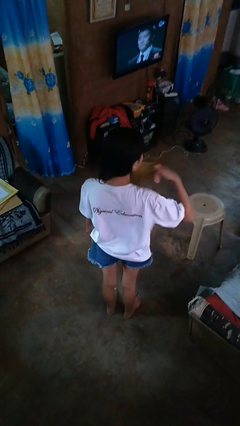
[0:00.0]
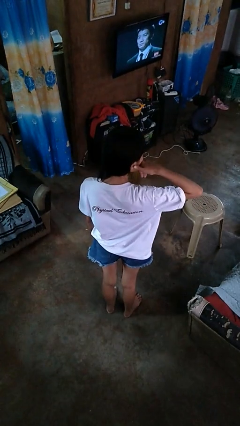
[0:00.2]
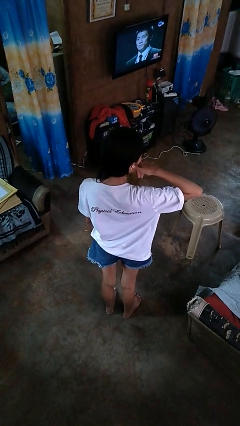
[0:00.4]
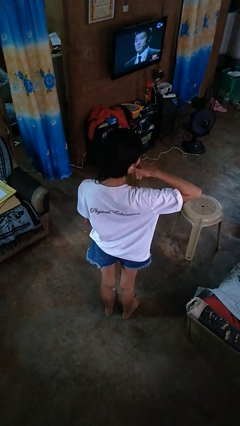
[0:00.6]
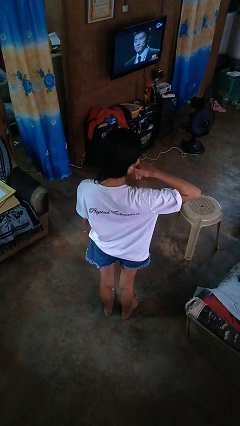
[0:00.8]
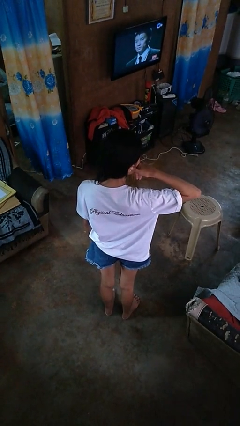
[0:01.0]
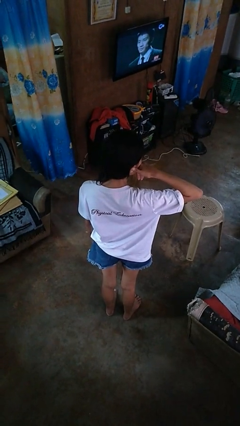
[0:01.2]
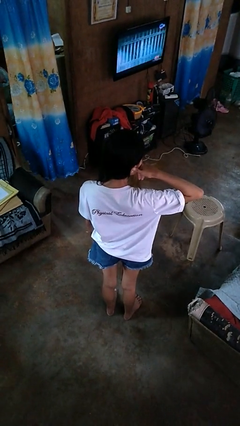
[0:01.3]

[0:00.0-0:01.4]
person gestures call me

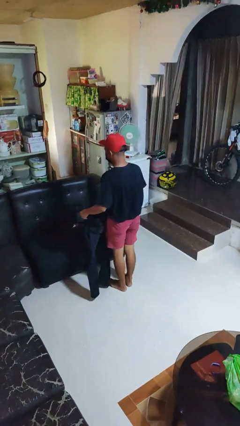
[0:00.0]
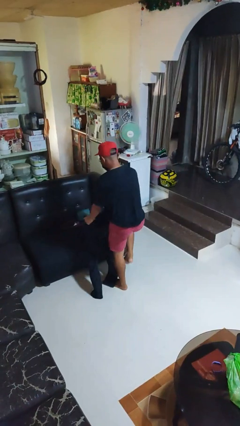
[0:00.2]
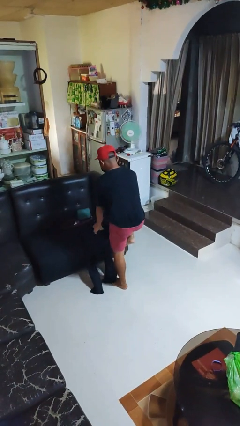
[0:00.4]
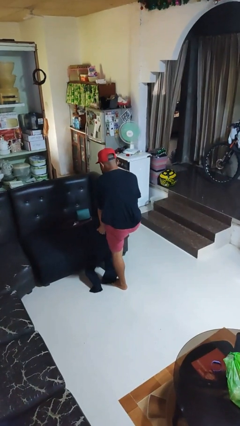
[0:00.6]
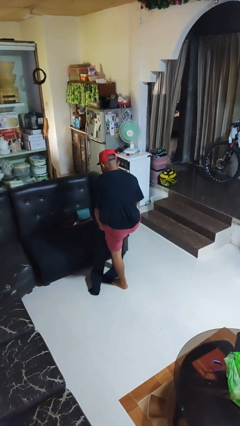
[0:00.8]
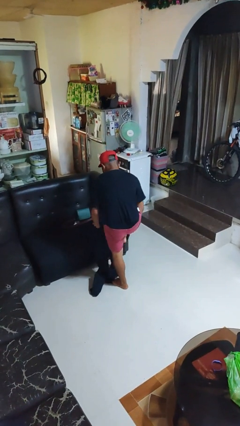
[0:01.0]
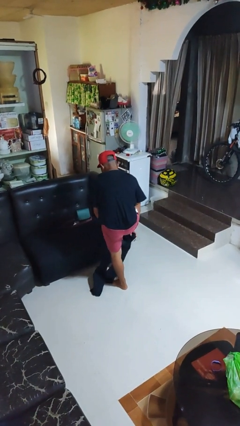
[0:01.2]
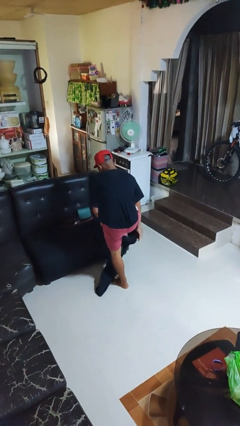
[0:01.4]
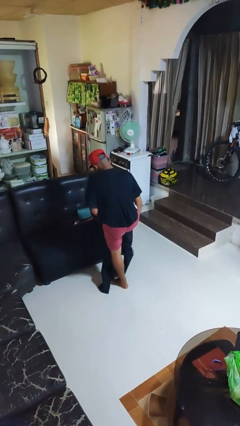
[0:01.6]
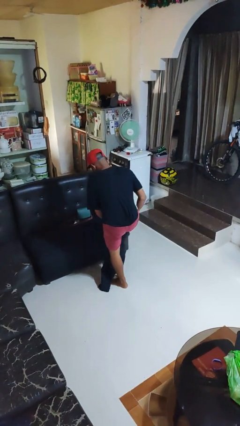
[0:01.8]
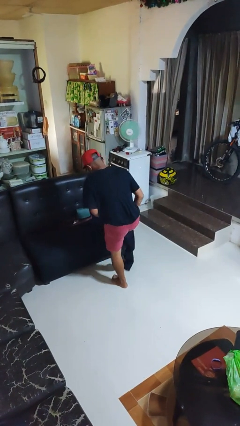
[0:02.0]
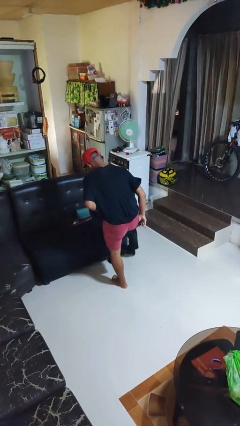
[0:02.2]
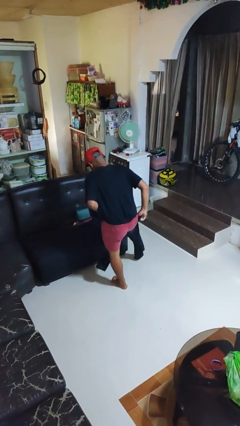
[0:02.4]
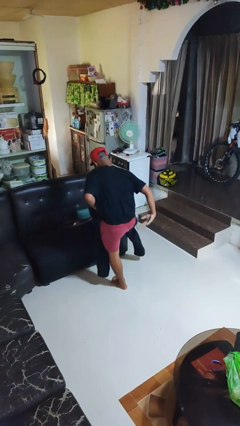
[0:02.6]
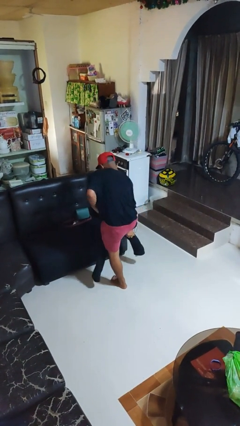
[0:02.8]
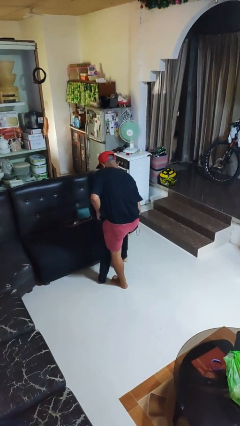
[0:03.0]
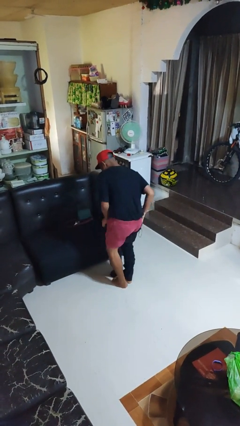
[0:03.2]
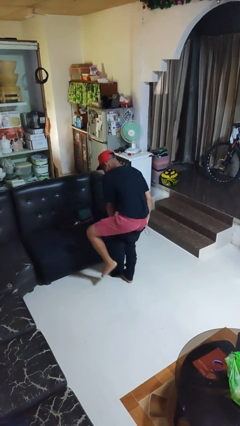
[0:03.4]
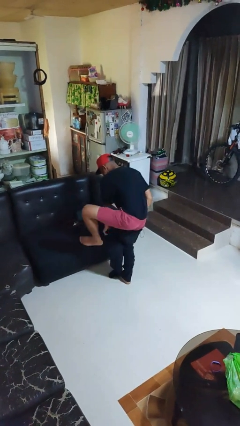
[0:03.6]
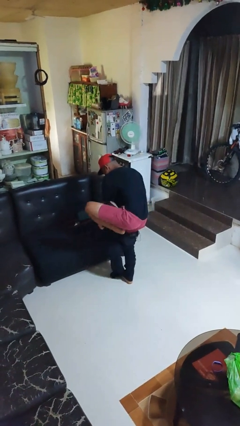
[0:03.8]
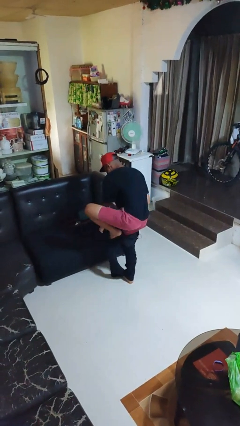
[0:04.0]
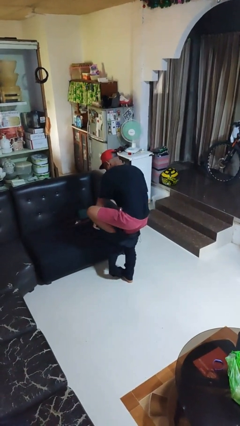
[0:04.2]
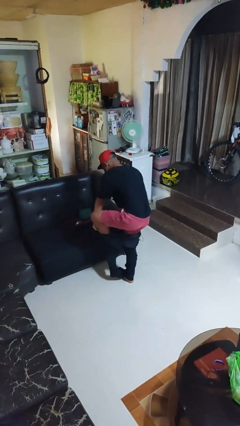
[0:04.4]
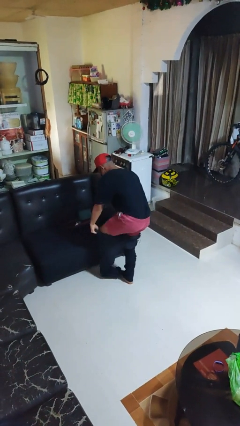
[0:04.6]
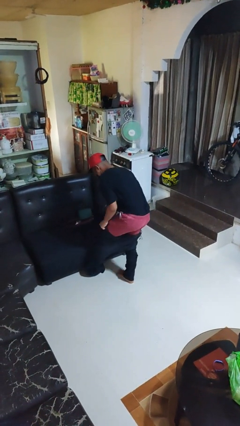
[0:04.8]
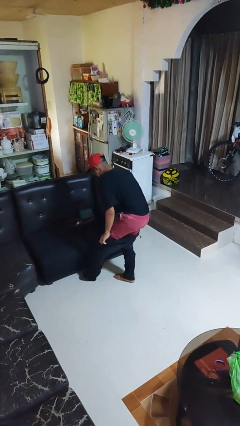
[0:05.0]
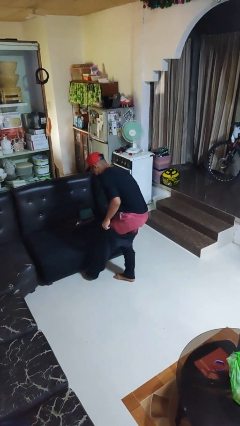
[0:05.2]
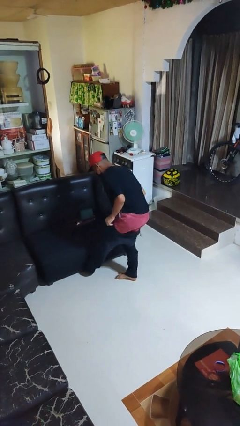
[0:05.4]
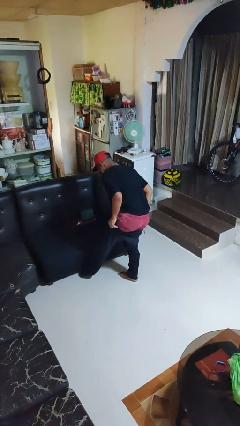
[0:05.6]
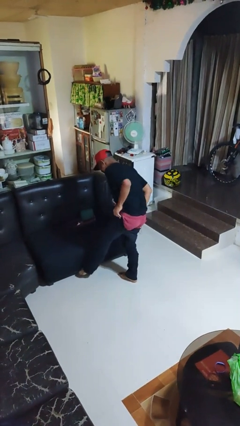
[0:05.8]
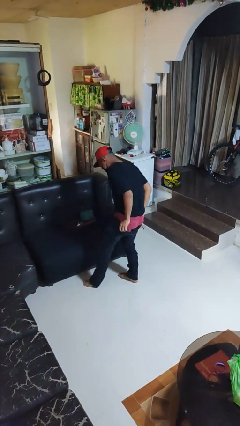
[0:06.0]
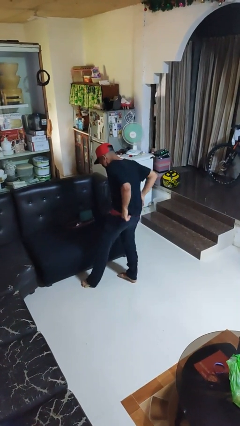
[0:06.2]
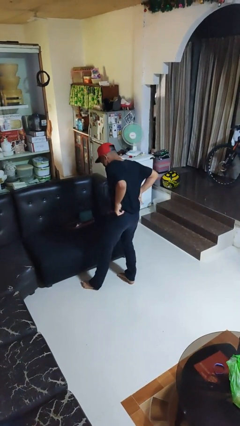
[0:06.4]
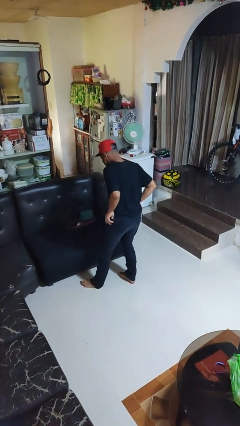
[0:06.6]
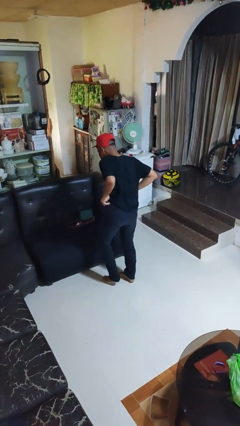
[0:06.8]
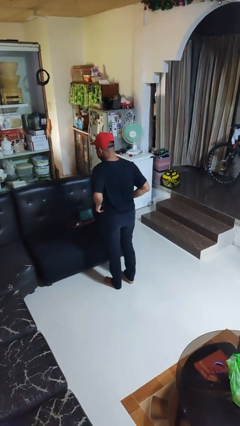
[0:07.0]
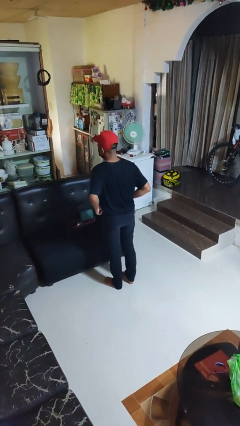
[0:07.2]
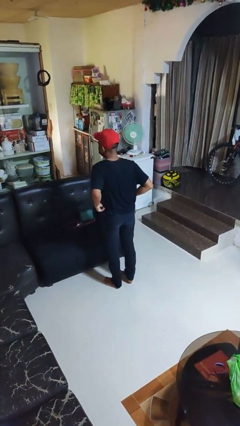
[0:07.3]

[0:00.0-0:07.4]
person puts on pants

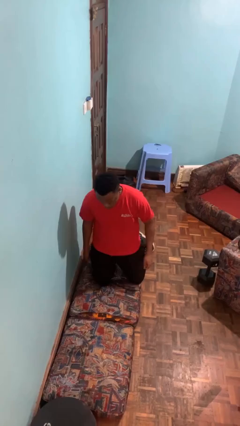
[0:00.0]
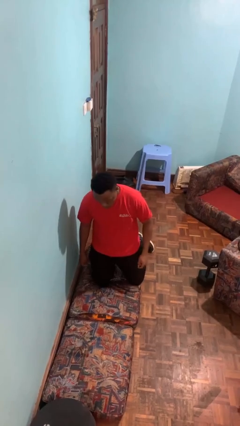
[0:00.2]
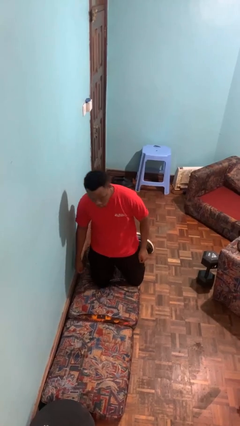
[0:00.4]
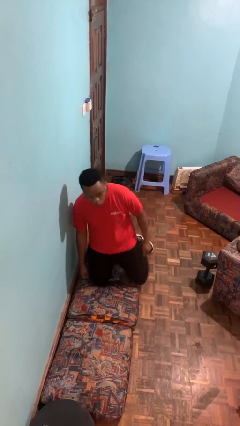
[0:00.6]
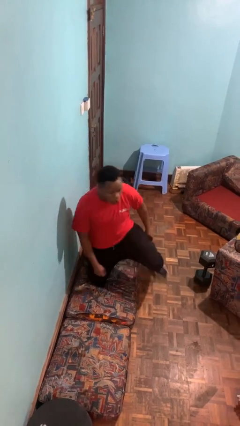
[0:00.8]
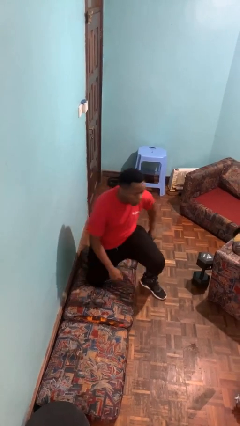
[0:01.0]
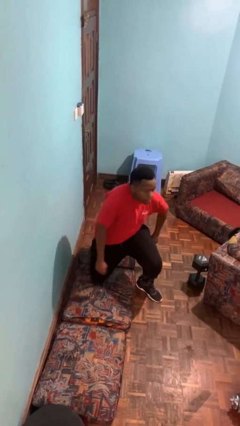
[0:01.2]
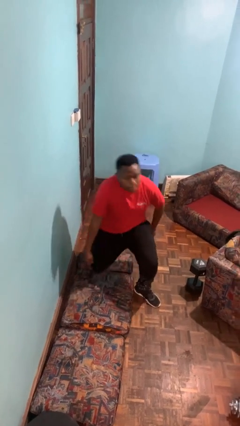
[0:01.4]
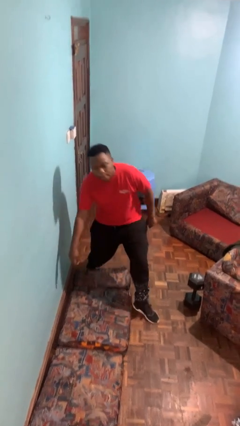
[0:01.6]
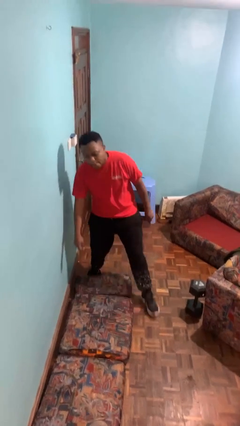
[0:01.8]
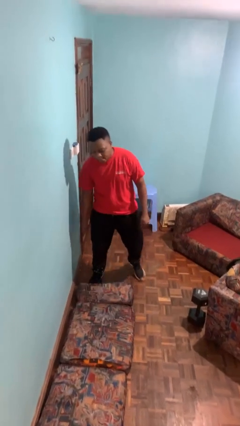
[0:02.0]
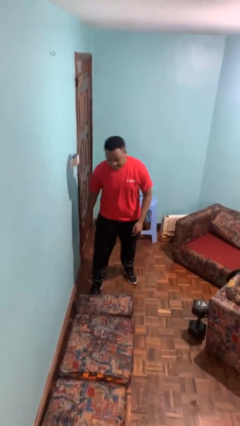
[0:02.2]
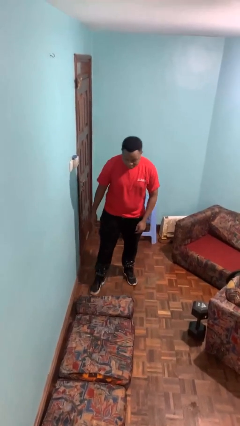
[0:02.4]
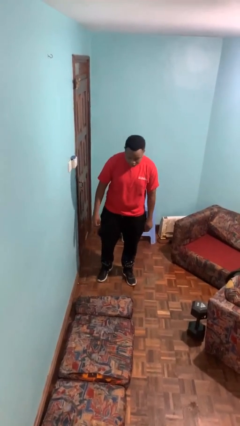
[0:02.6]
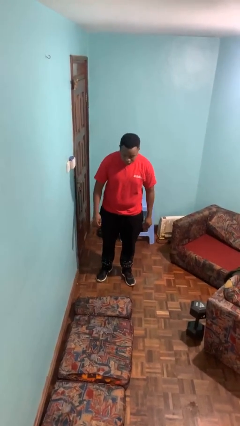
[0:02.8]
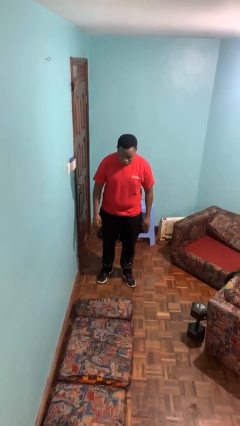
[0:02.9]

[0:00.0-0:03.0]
person stands up from floor

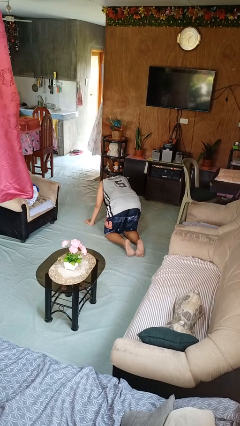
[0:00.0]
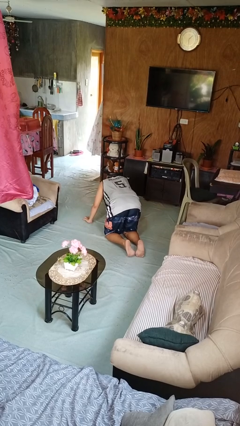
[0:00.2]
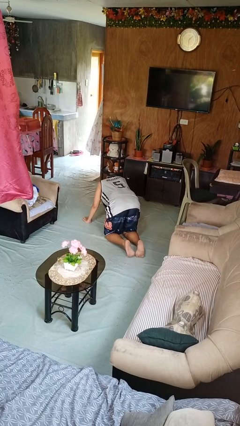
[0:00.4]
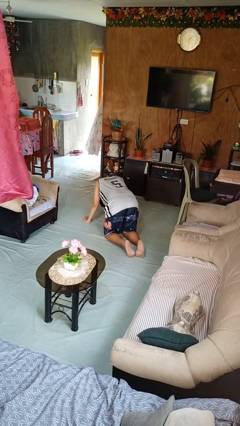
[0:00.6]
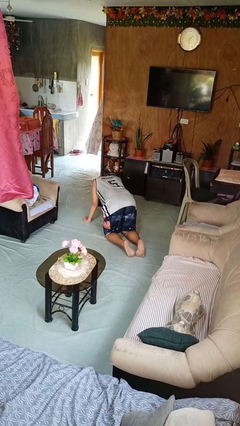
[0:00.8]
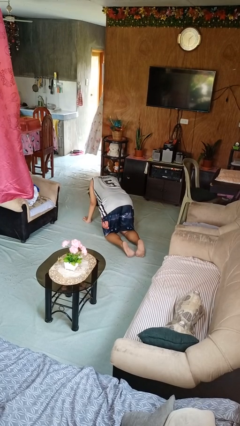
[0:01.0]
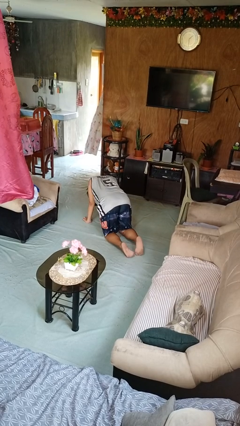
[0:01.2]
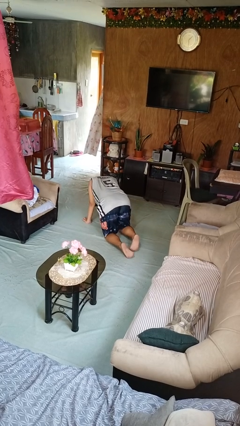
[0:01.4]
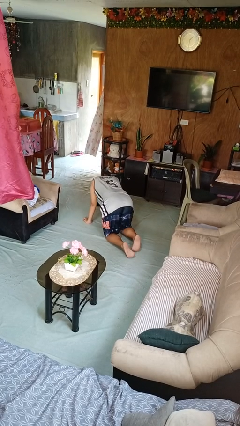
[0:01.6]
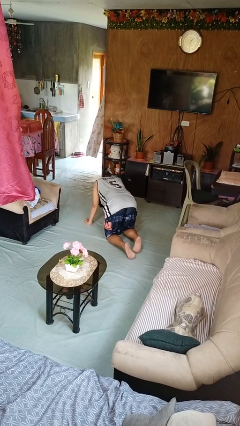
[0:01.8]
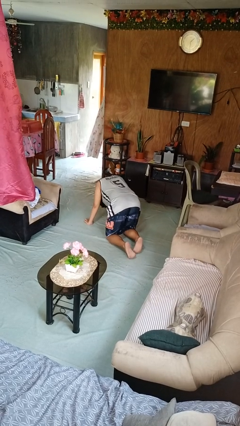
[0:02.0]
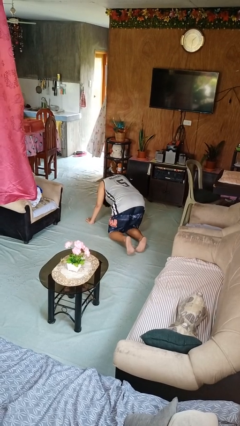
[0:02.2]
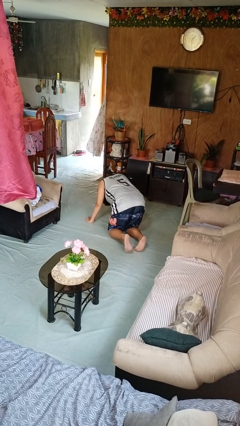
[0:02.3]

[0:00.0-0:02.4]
person crawls

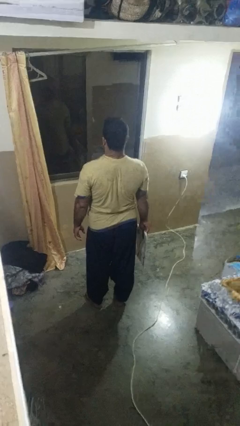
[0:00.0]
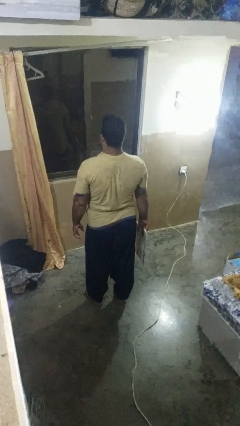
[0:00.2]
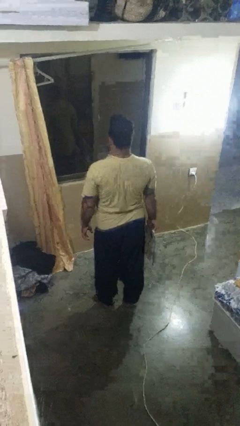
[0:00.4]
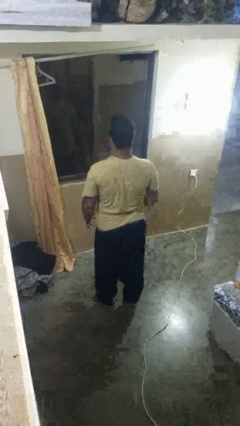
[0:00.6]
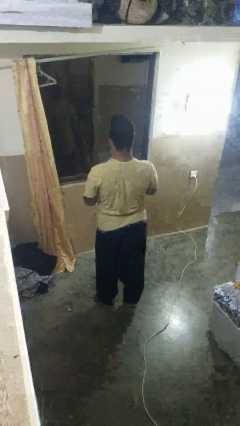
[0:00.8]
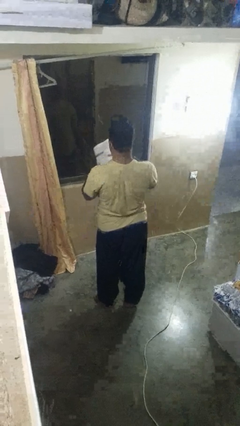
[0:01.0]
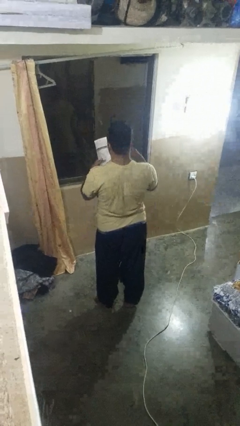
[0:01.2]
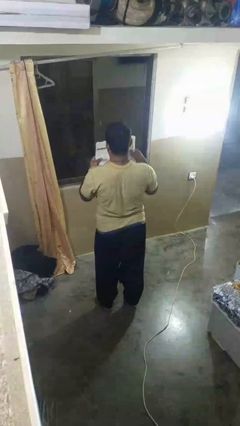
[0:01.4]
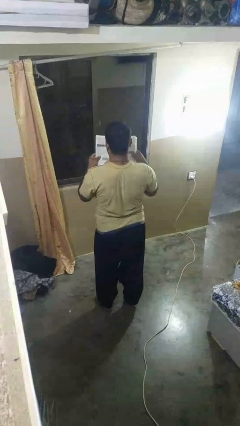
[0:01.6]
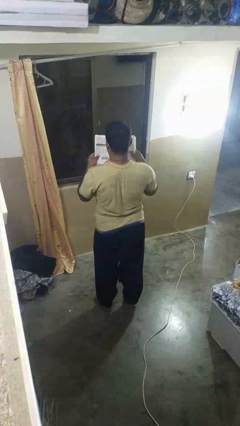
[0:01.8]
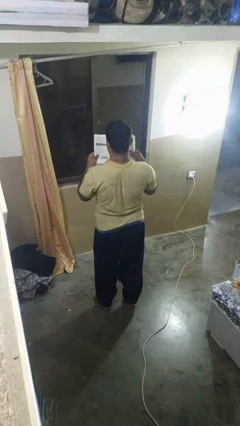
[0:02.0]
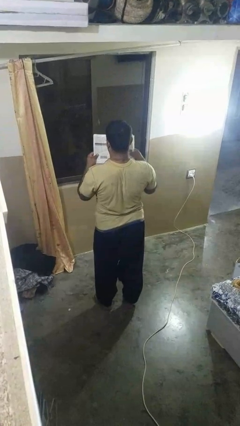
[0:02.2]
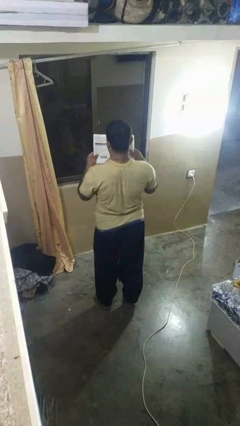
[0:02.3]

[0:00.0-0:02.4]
person reads newspaper

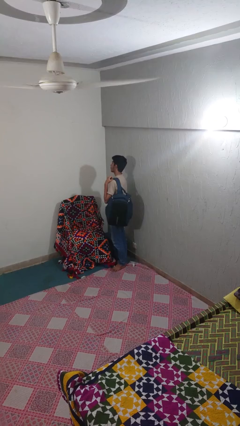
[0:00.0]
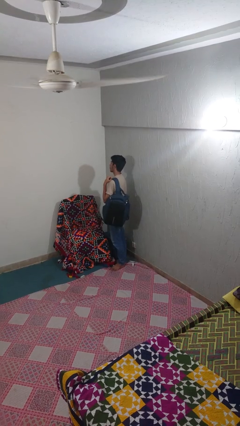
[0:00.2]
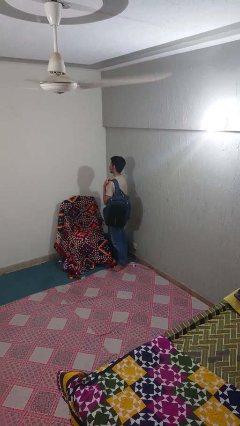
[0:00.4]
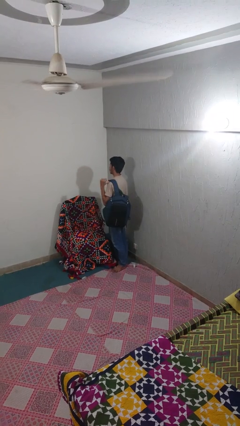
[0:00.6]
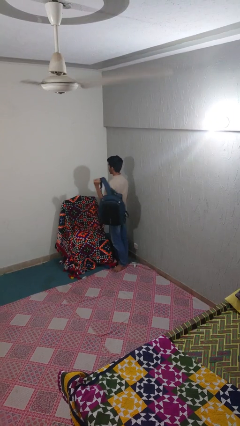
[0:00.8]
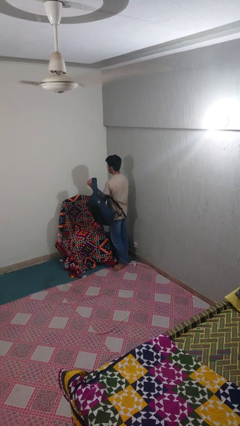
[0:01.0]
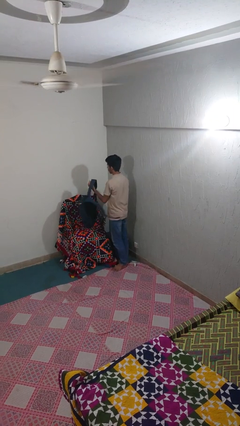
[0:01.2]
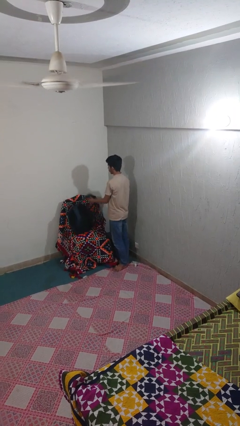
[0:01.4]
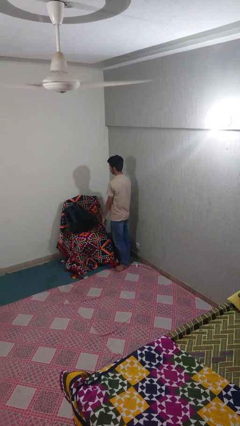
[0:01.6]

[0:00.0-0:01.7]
person puts down object on couch
